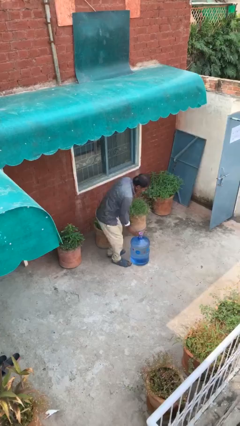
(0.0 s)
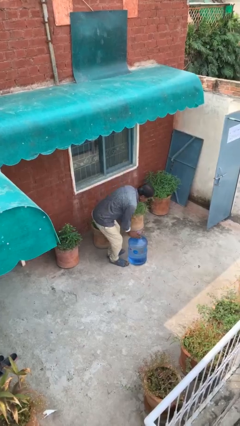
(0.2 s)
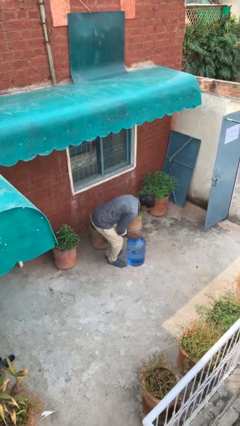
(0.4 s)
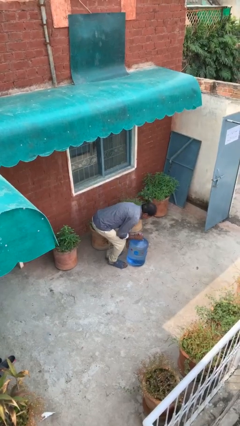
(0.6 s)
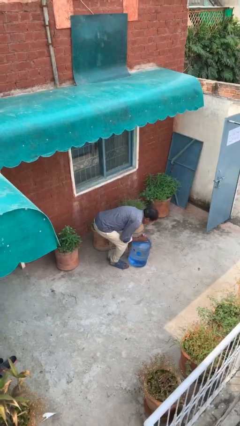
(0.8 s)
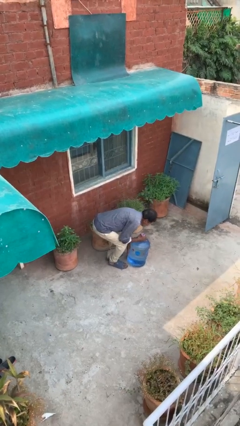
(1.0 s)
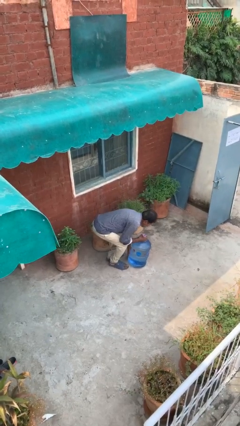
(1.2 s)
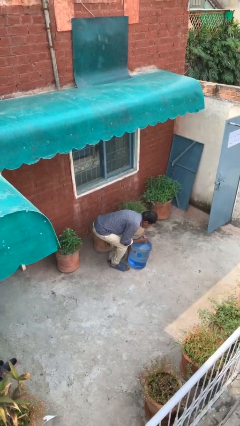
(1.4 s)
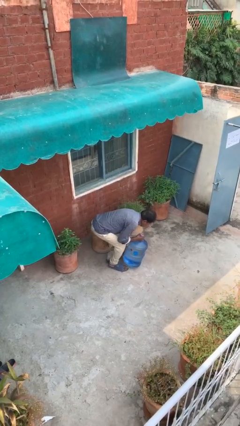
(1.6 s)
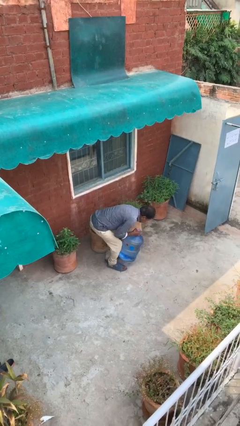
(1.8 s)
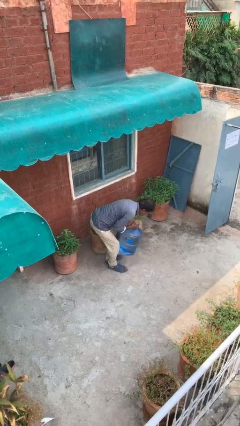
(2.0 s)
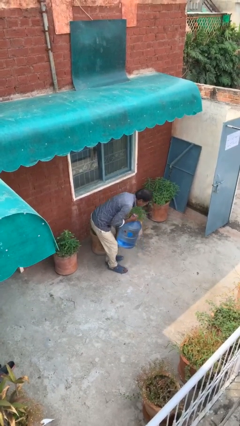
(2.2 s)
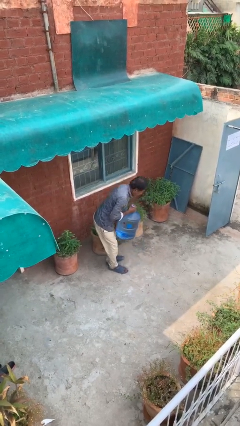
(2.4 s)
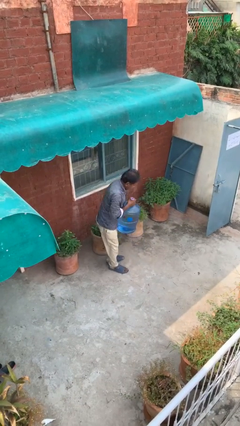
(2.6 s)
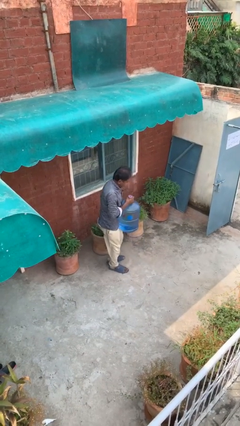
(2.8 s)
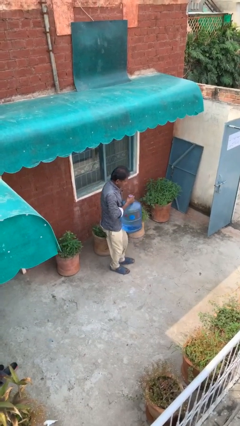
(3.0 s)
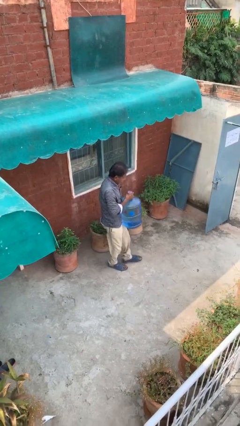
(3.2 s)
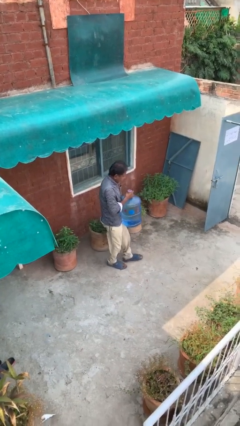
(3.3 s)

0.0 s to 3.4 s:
person picks up object from floor

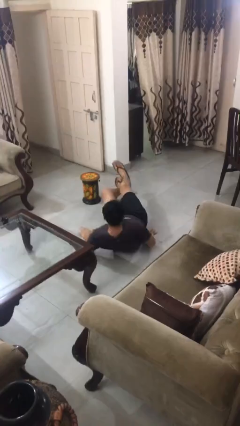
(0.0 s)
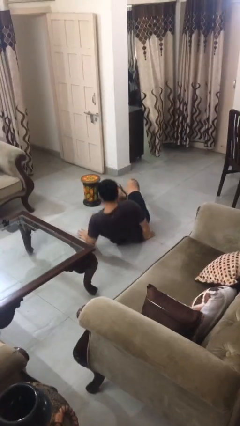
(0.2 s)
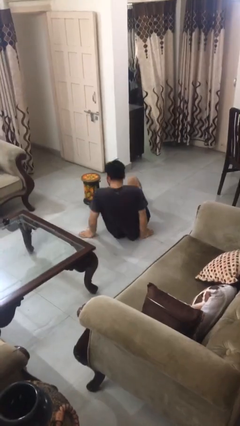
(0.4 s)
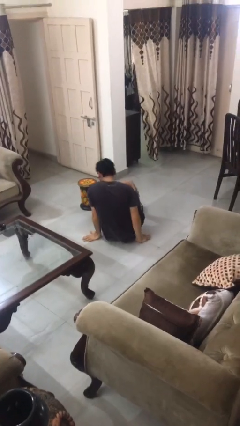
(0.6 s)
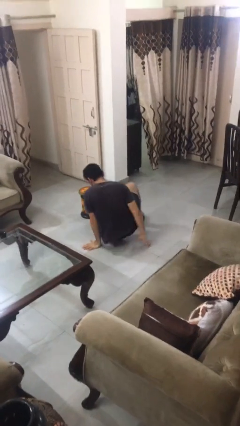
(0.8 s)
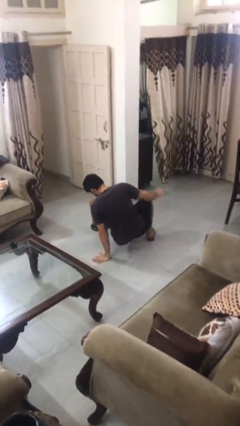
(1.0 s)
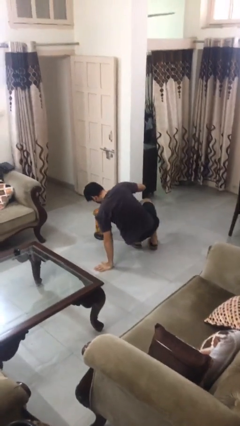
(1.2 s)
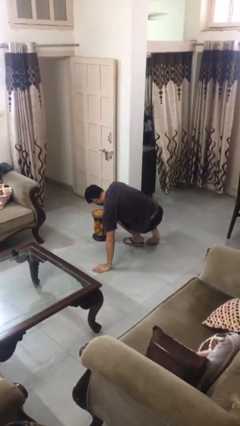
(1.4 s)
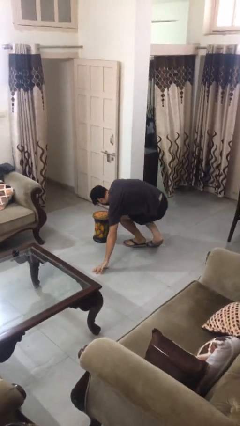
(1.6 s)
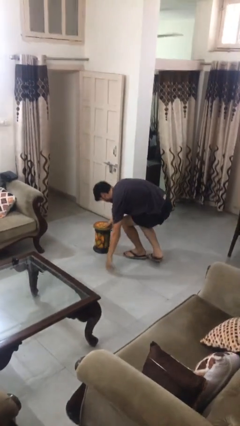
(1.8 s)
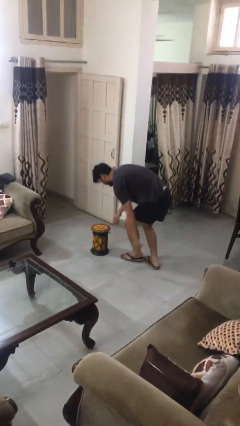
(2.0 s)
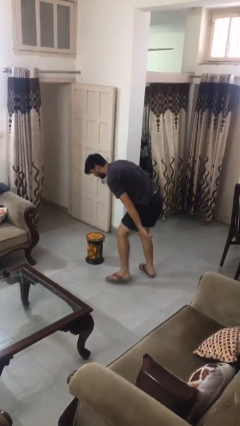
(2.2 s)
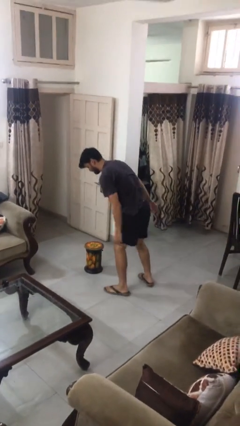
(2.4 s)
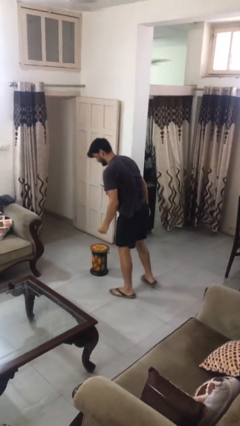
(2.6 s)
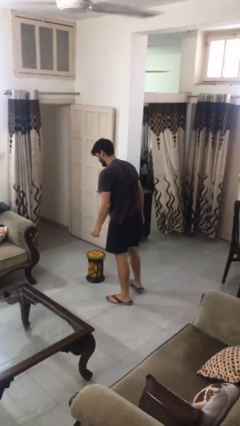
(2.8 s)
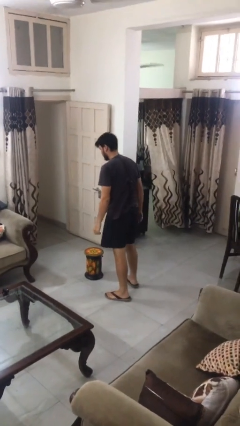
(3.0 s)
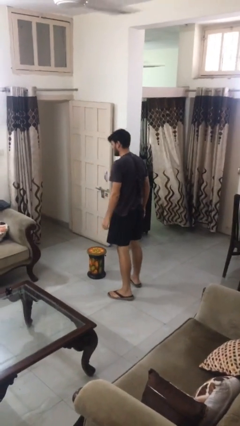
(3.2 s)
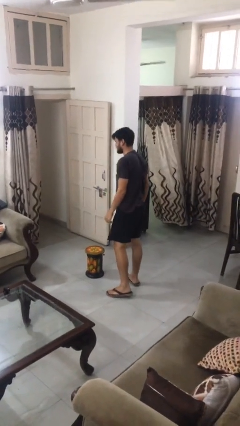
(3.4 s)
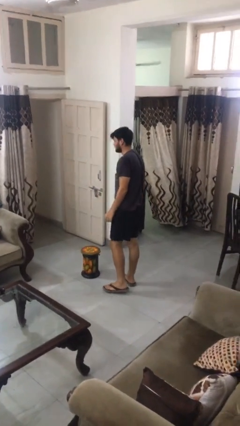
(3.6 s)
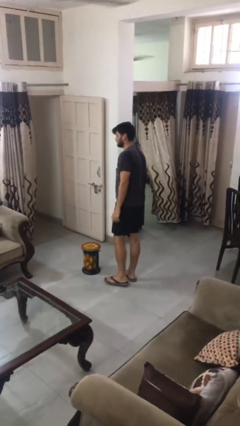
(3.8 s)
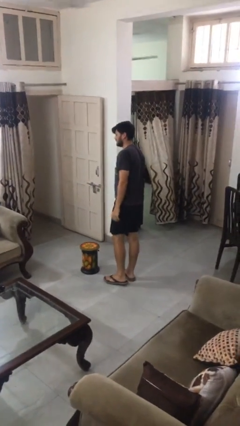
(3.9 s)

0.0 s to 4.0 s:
person stands up from floor

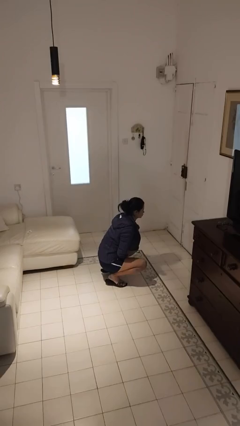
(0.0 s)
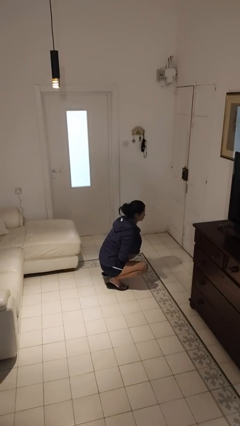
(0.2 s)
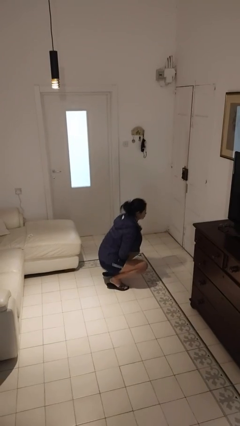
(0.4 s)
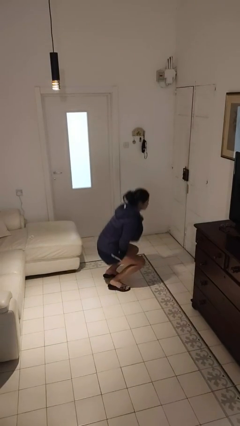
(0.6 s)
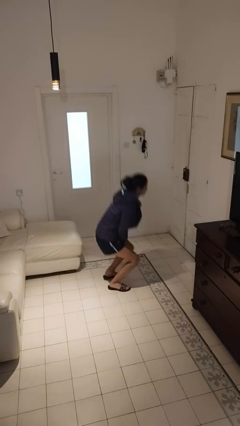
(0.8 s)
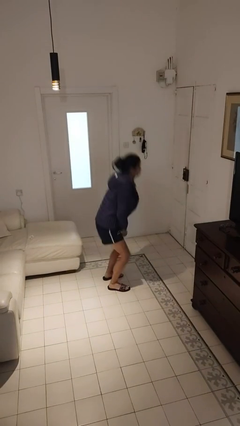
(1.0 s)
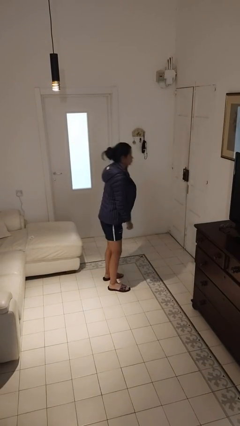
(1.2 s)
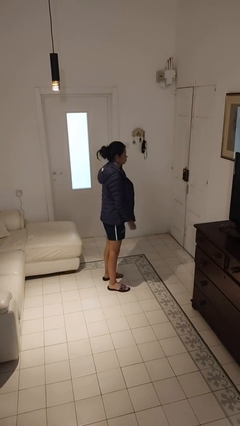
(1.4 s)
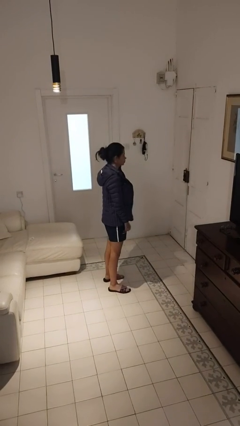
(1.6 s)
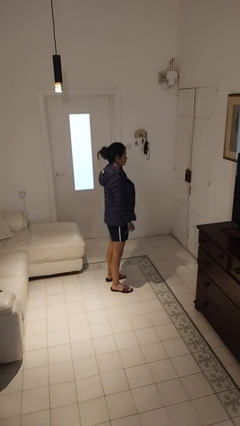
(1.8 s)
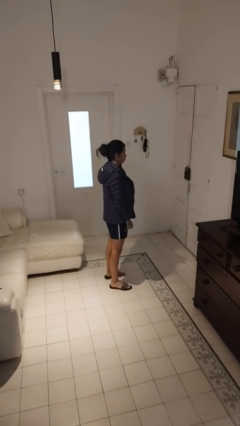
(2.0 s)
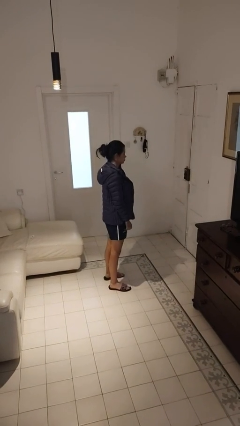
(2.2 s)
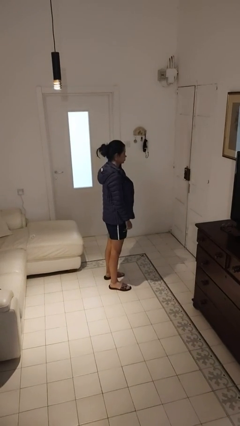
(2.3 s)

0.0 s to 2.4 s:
person stands up

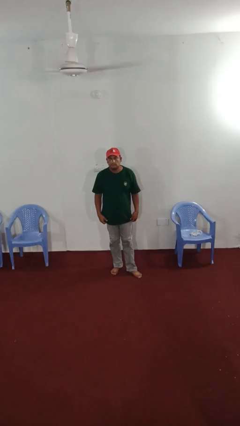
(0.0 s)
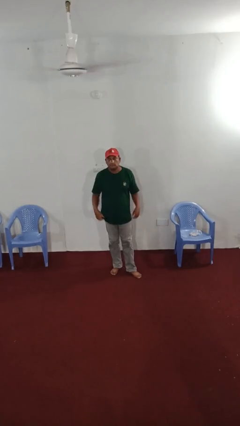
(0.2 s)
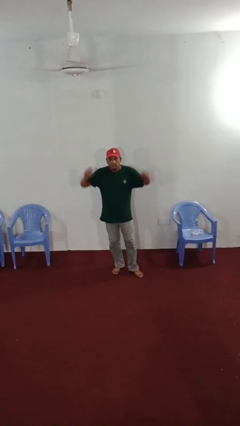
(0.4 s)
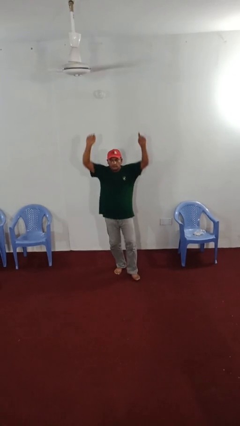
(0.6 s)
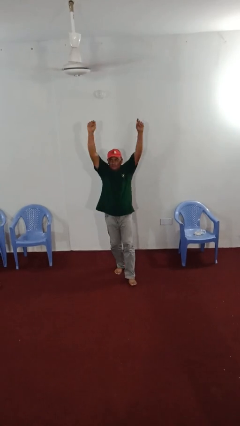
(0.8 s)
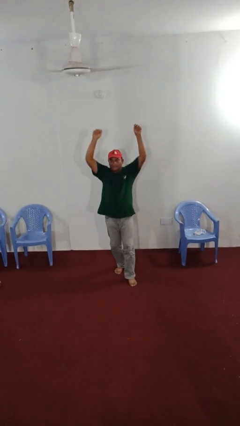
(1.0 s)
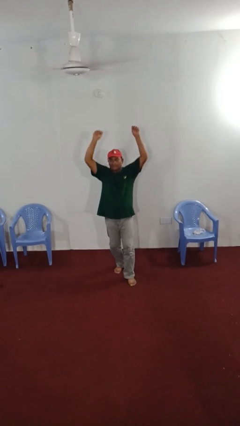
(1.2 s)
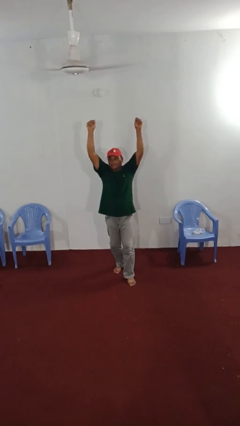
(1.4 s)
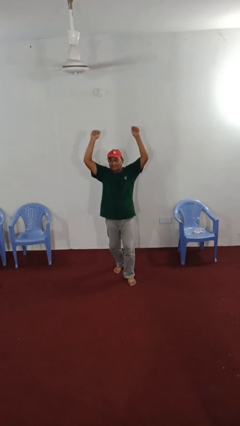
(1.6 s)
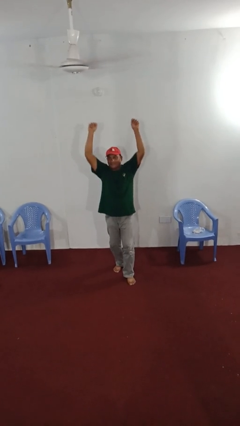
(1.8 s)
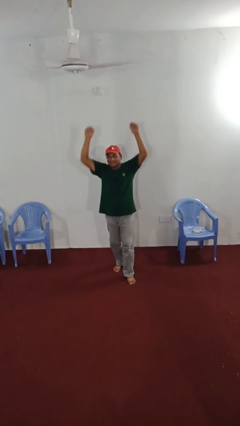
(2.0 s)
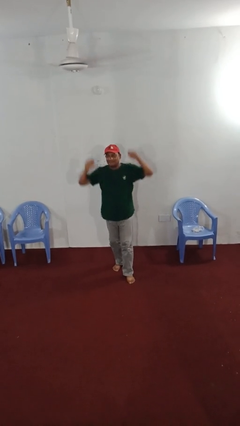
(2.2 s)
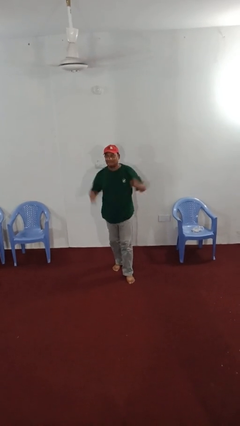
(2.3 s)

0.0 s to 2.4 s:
person dances in place

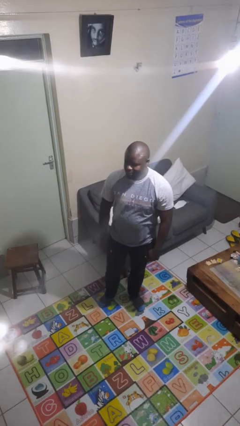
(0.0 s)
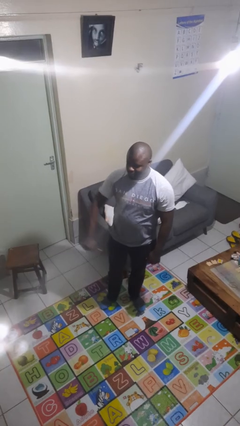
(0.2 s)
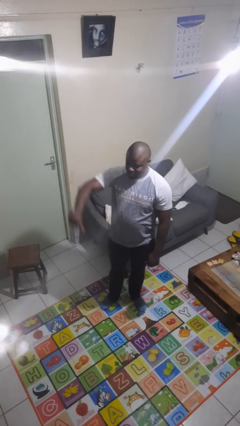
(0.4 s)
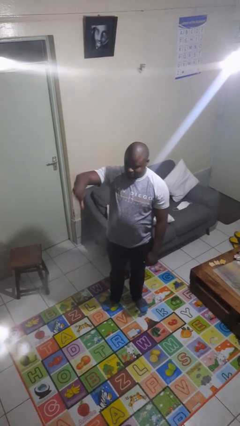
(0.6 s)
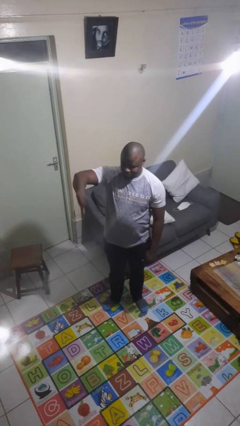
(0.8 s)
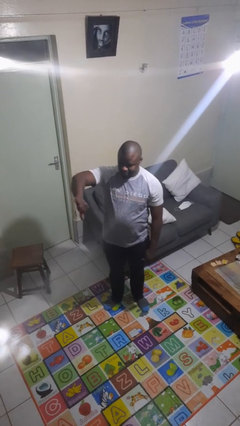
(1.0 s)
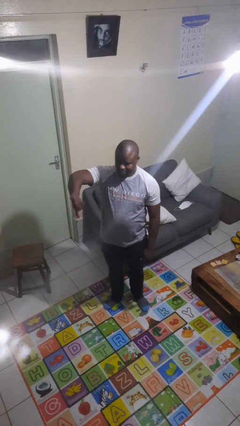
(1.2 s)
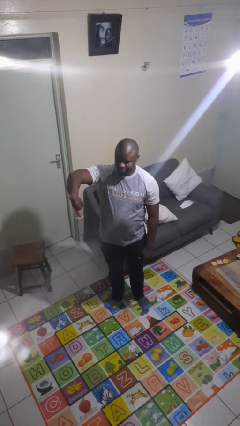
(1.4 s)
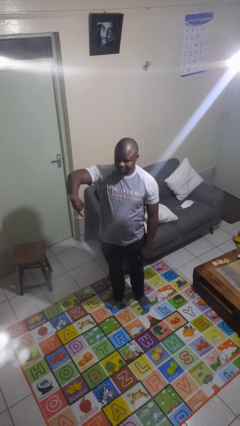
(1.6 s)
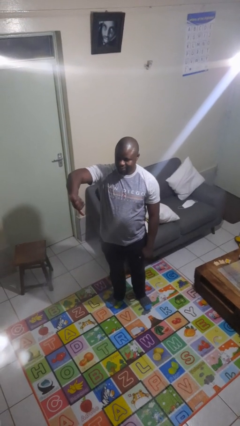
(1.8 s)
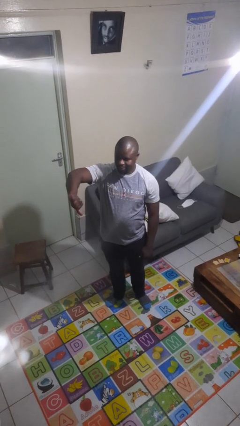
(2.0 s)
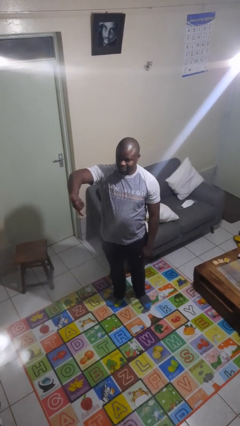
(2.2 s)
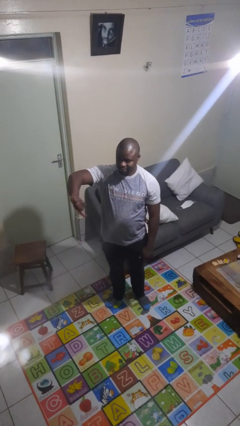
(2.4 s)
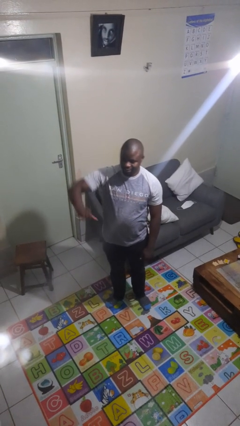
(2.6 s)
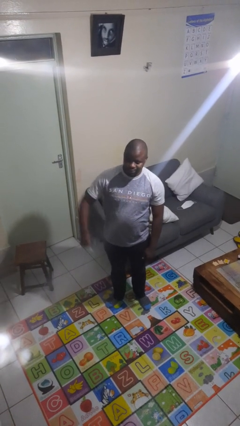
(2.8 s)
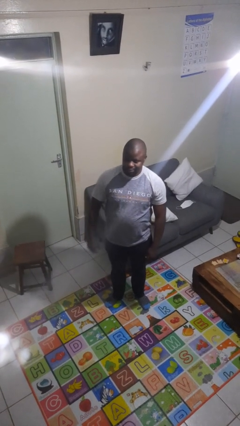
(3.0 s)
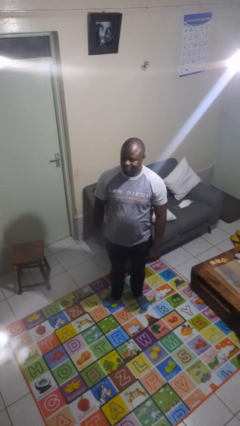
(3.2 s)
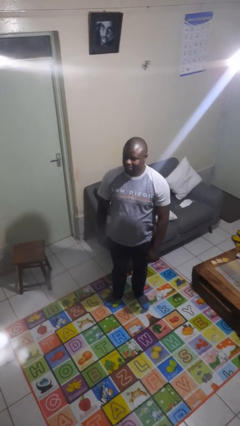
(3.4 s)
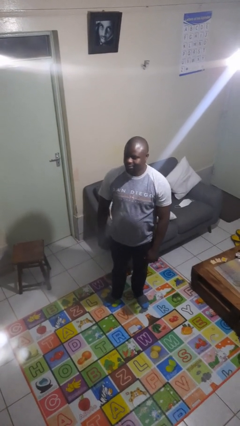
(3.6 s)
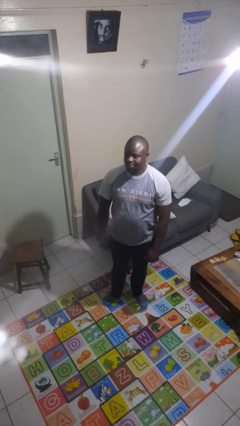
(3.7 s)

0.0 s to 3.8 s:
person gestures thumbs down

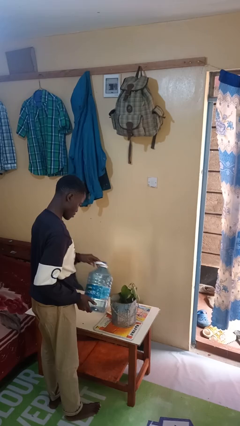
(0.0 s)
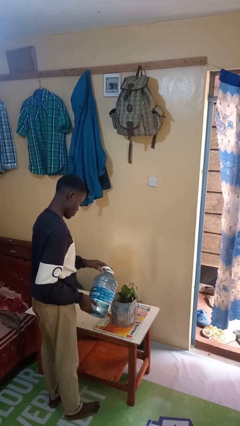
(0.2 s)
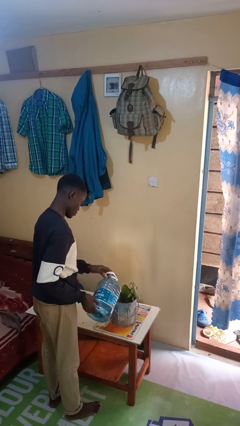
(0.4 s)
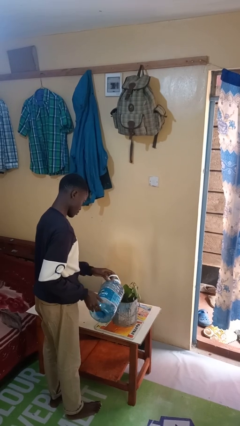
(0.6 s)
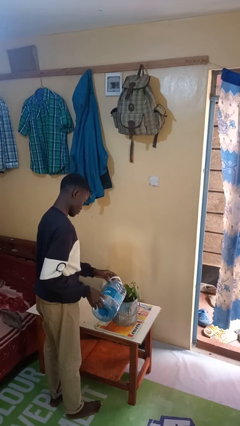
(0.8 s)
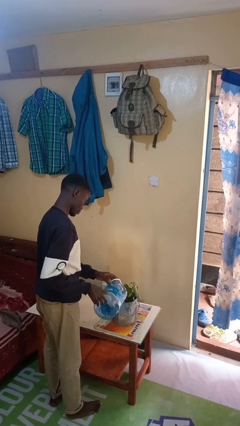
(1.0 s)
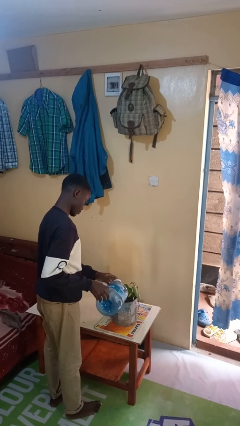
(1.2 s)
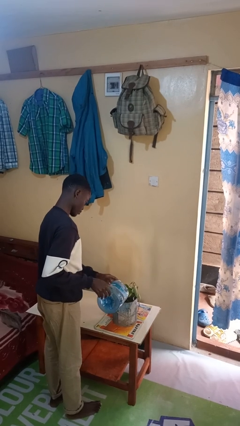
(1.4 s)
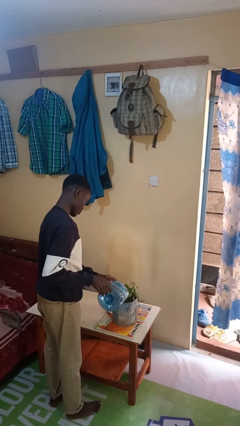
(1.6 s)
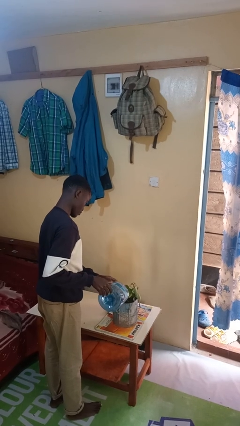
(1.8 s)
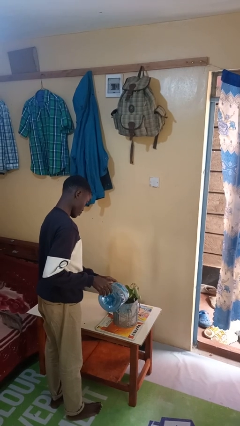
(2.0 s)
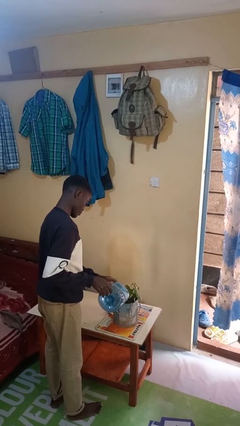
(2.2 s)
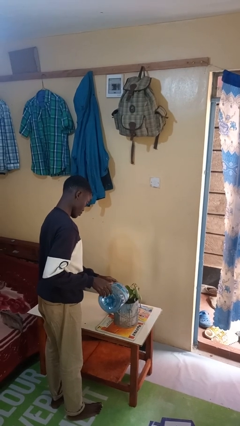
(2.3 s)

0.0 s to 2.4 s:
person waters houseplant
